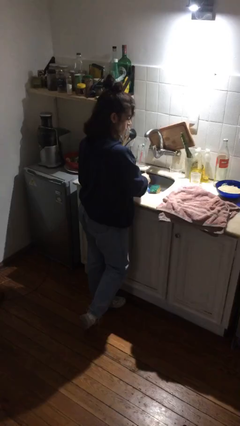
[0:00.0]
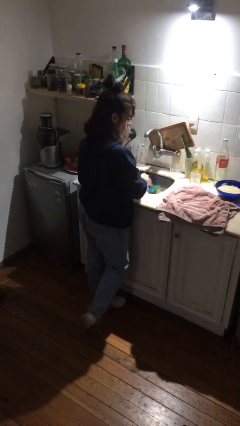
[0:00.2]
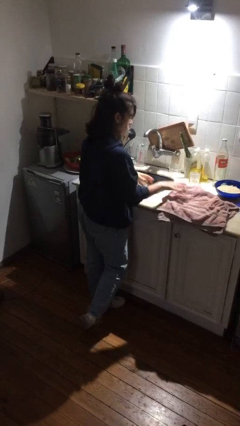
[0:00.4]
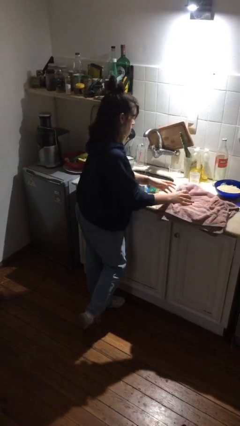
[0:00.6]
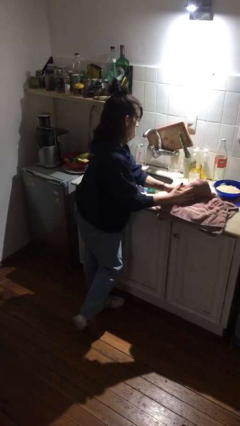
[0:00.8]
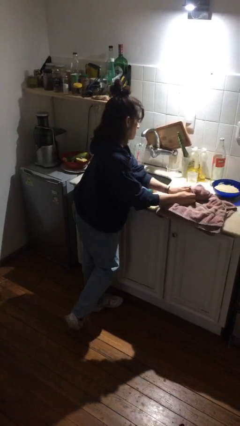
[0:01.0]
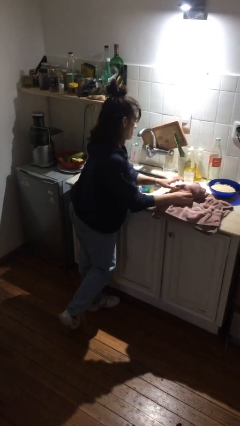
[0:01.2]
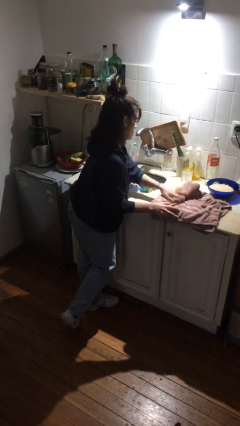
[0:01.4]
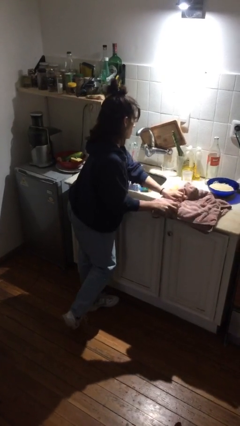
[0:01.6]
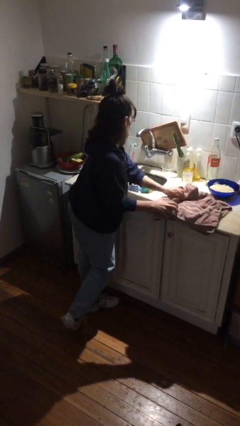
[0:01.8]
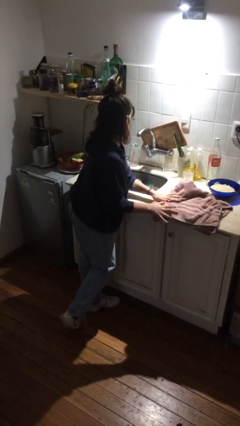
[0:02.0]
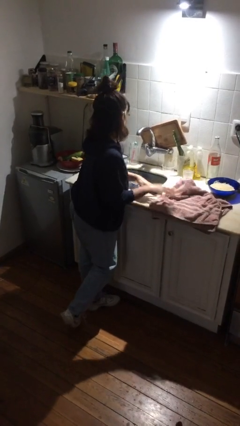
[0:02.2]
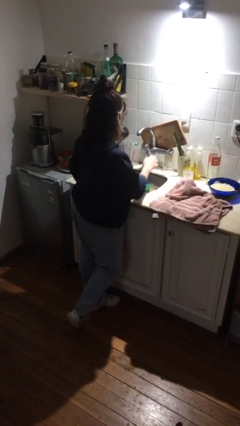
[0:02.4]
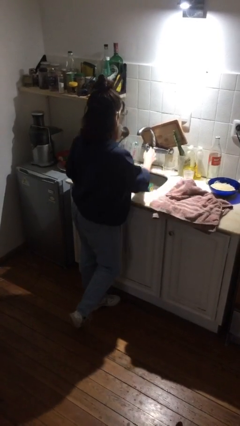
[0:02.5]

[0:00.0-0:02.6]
person dries hands with towel

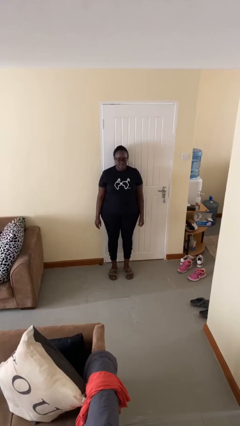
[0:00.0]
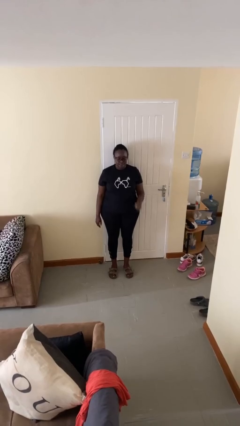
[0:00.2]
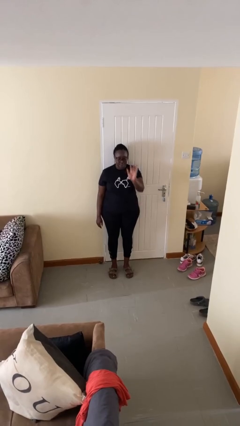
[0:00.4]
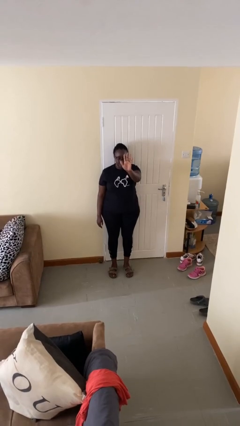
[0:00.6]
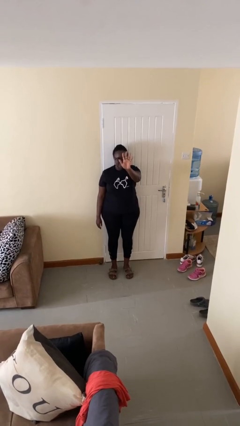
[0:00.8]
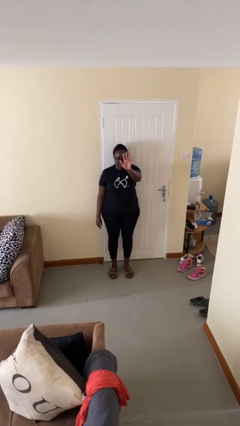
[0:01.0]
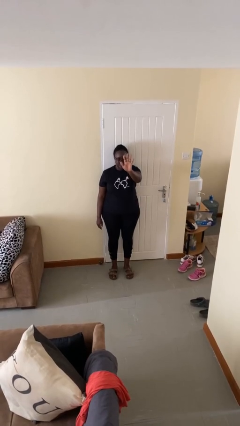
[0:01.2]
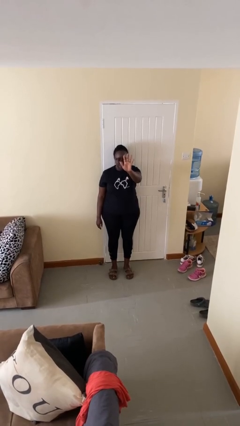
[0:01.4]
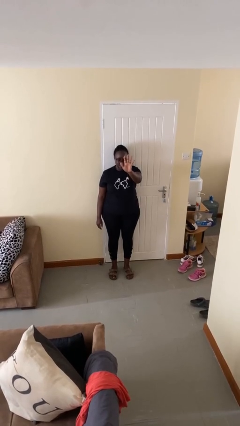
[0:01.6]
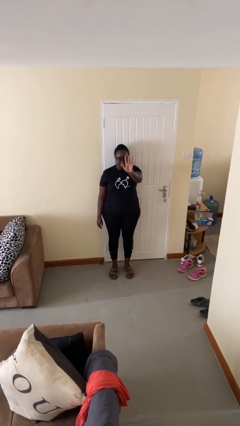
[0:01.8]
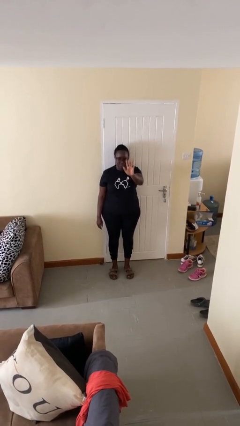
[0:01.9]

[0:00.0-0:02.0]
person gestures number five

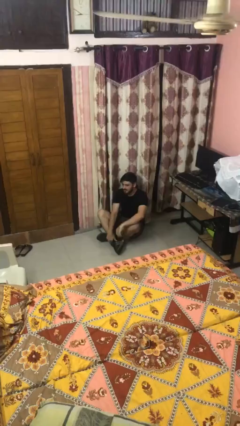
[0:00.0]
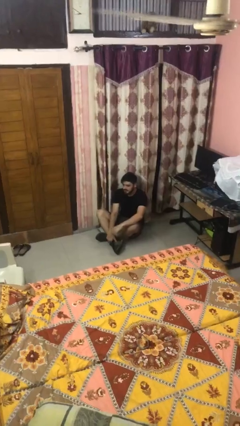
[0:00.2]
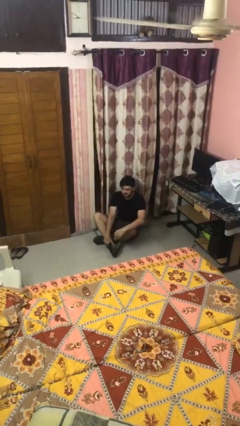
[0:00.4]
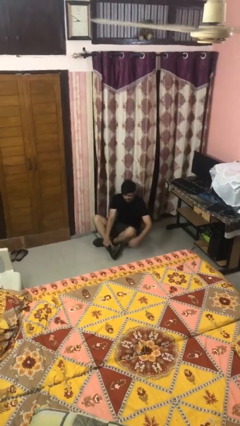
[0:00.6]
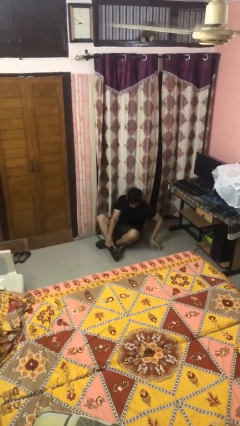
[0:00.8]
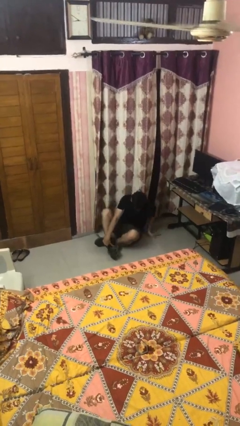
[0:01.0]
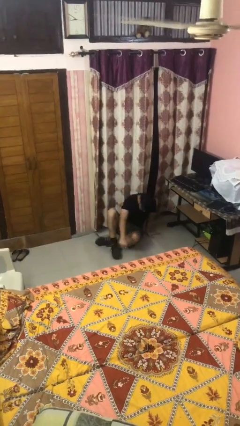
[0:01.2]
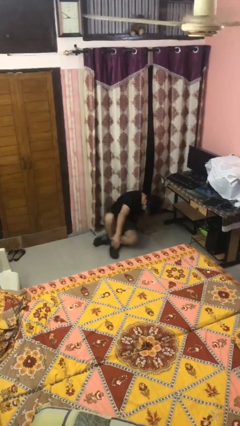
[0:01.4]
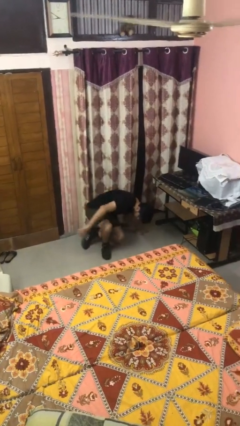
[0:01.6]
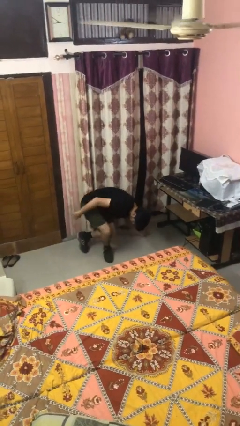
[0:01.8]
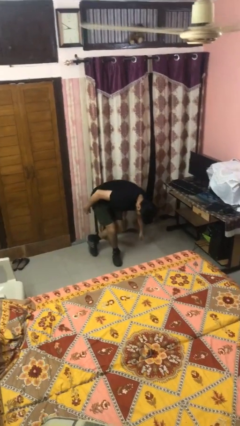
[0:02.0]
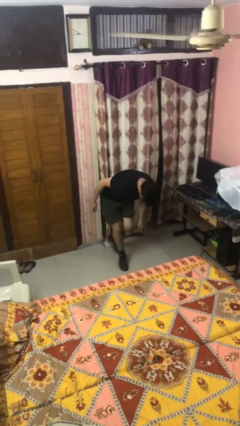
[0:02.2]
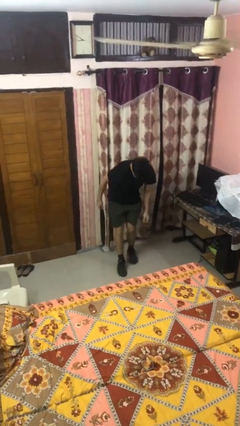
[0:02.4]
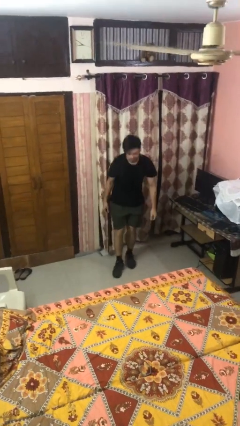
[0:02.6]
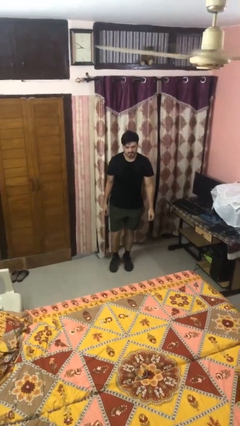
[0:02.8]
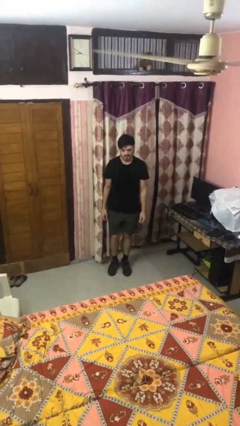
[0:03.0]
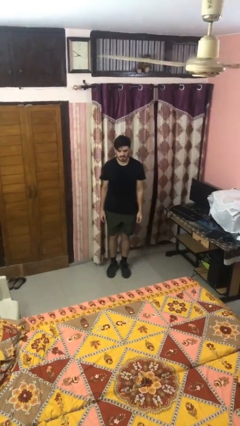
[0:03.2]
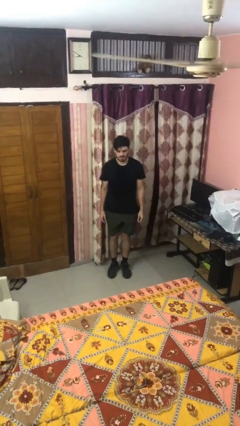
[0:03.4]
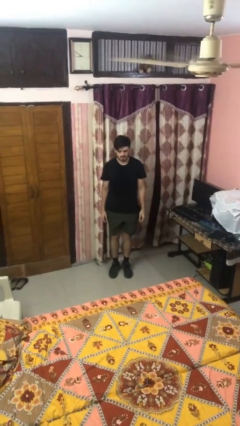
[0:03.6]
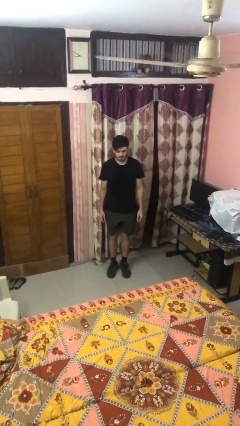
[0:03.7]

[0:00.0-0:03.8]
person stands up from floor

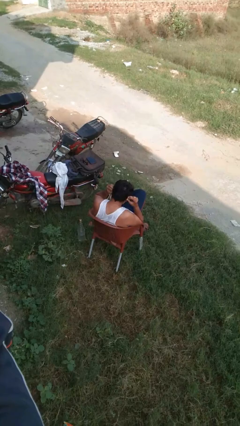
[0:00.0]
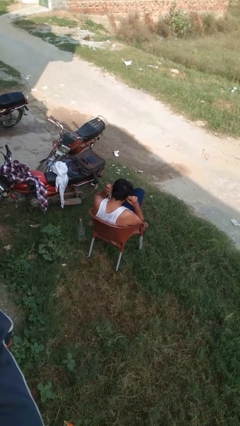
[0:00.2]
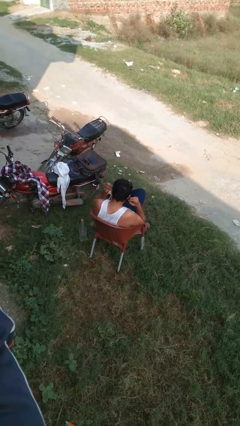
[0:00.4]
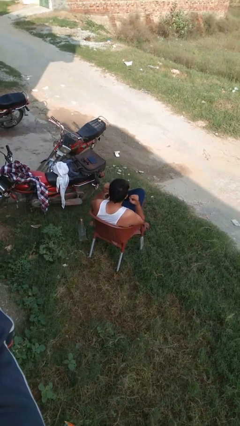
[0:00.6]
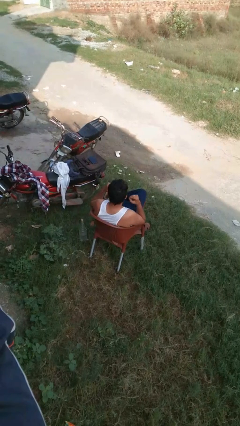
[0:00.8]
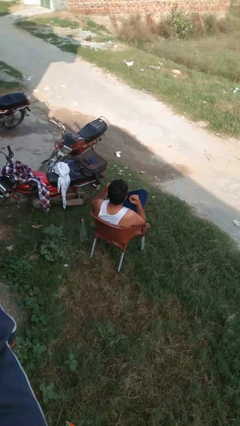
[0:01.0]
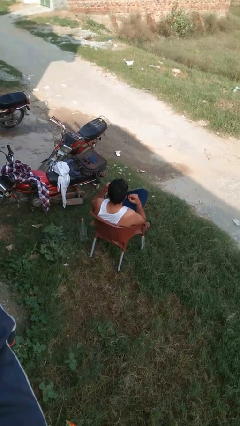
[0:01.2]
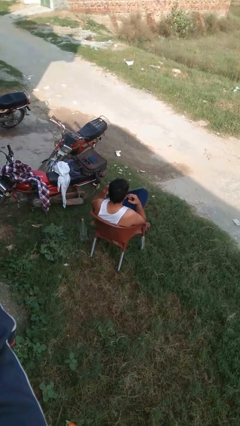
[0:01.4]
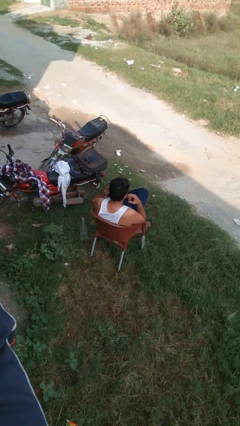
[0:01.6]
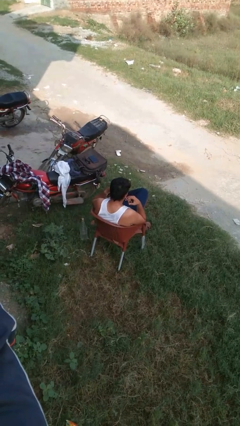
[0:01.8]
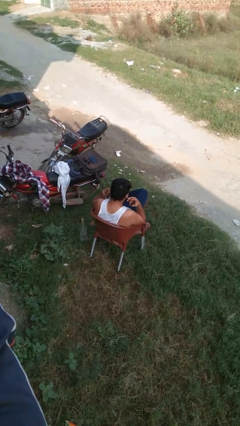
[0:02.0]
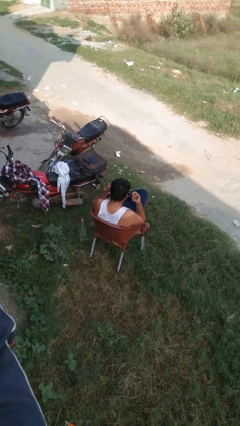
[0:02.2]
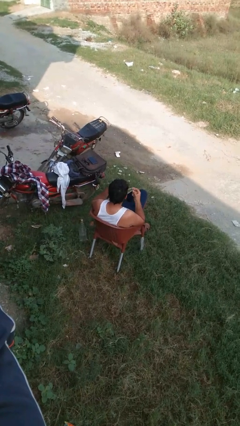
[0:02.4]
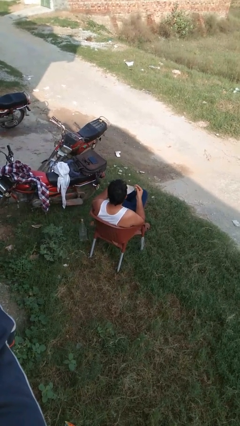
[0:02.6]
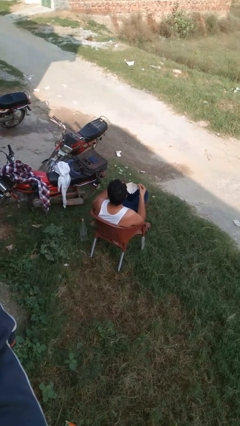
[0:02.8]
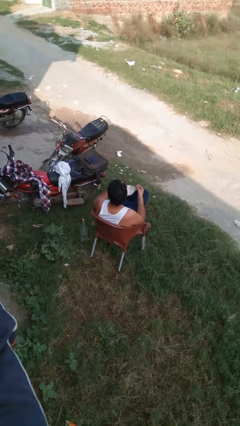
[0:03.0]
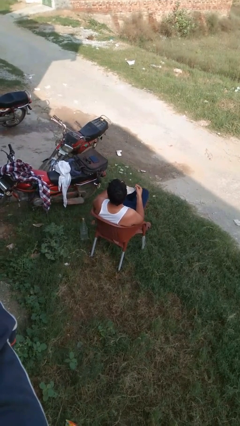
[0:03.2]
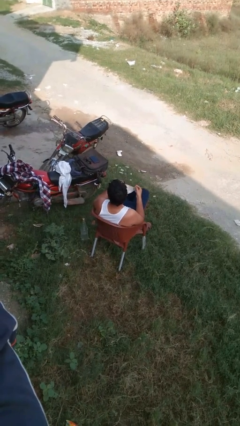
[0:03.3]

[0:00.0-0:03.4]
person takes off facemask

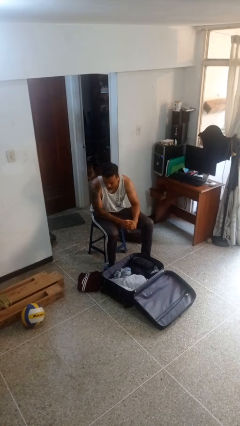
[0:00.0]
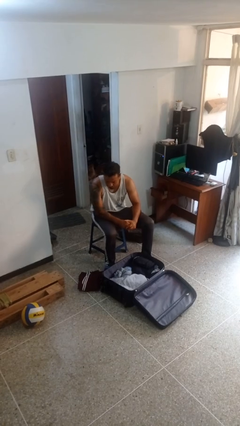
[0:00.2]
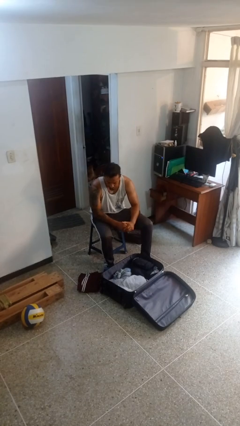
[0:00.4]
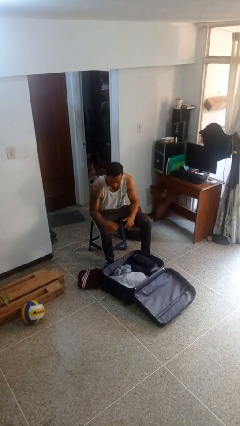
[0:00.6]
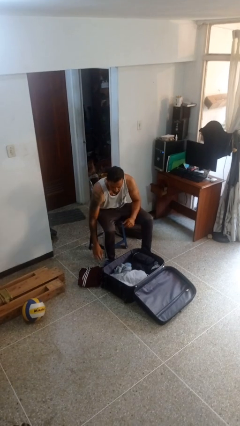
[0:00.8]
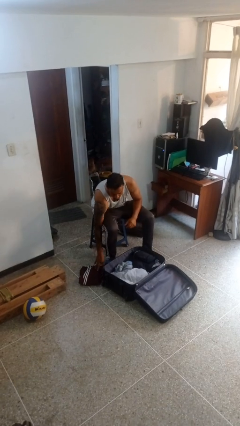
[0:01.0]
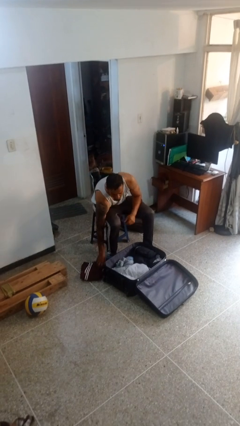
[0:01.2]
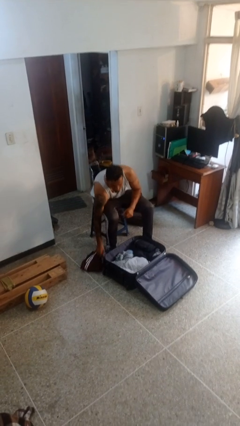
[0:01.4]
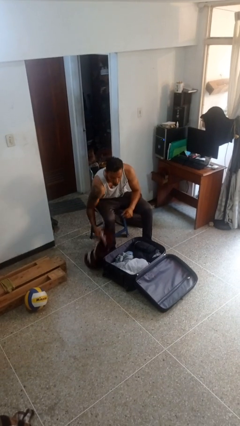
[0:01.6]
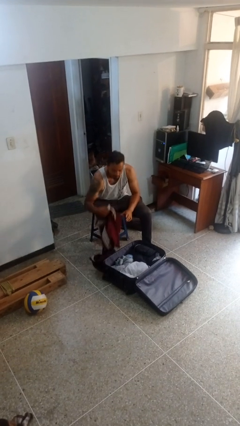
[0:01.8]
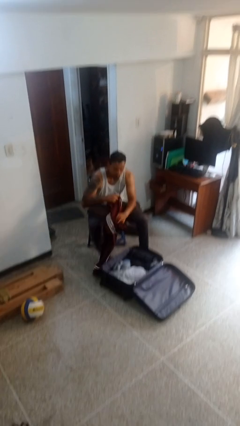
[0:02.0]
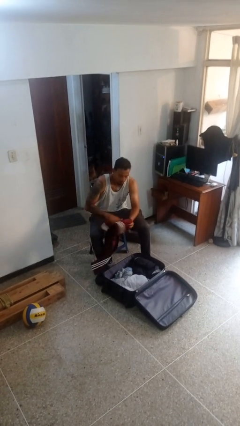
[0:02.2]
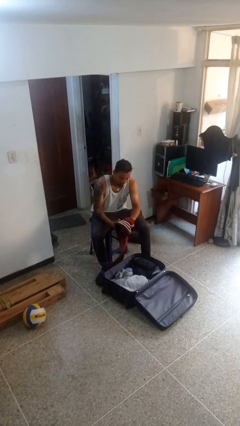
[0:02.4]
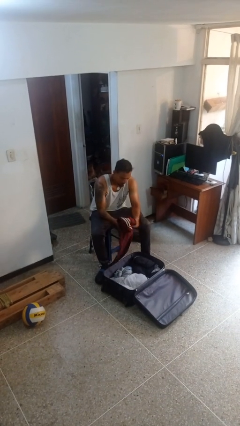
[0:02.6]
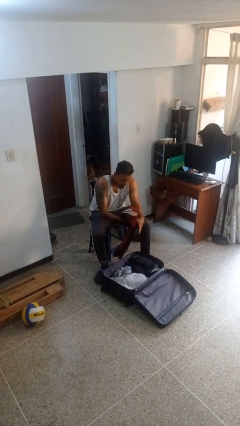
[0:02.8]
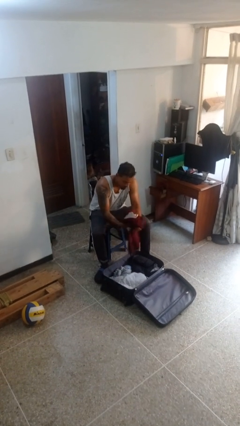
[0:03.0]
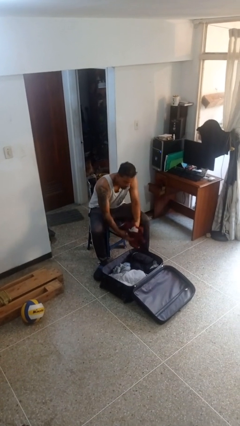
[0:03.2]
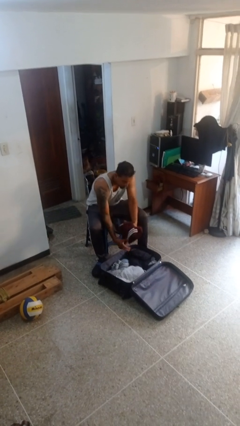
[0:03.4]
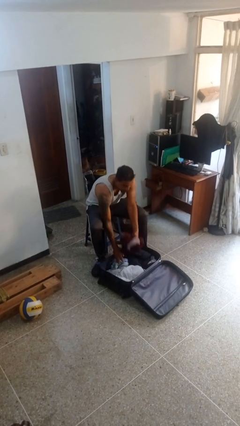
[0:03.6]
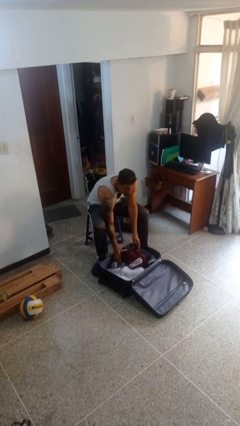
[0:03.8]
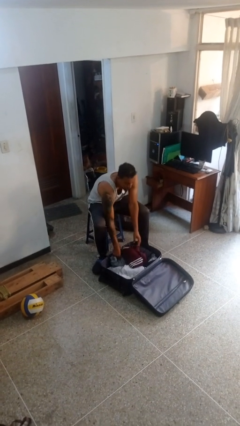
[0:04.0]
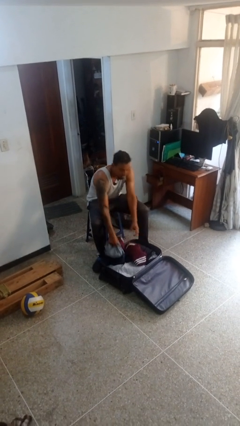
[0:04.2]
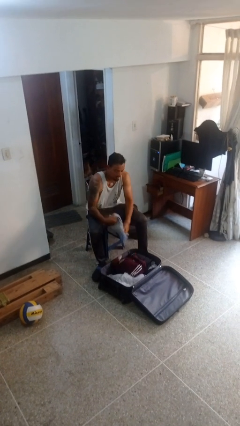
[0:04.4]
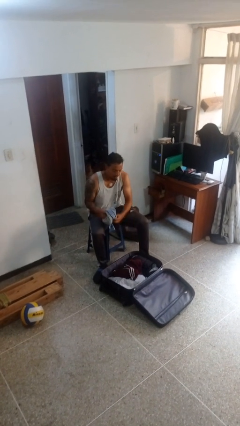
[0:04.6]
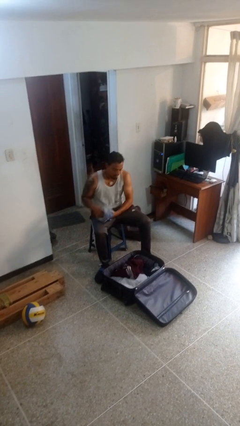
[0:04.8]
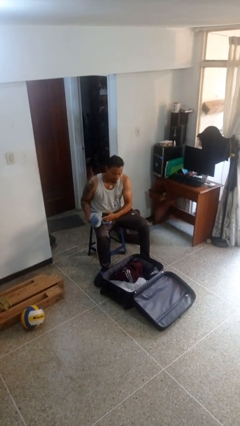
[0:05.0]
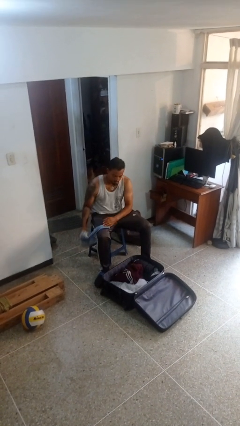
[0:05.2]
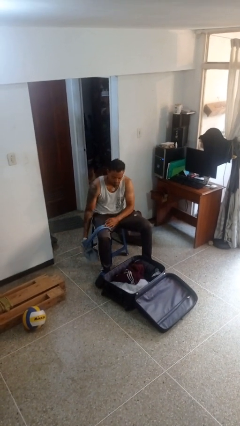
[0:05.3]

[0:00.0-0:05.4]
person loads clothes into suitcase

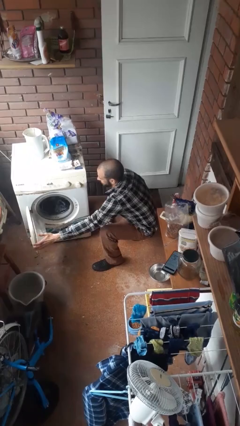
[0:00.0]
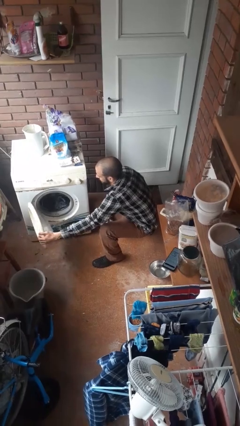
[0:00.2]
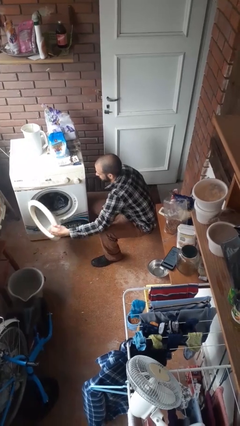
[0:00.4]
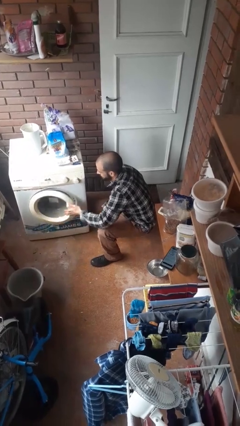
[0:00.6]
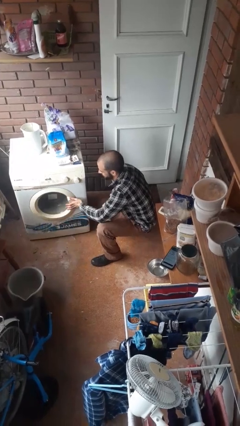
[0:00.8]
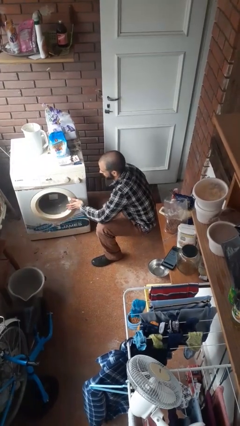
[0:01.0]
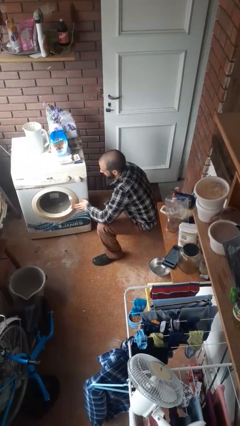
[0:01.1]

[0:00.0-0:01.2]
person closes clothes washer
